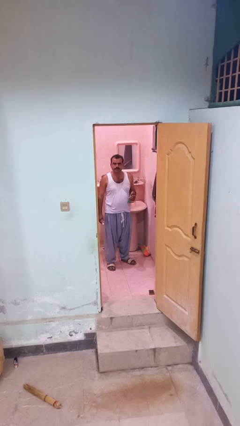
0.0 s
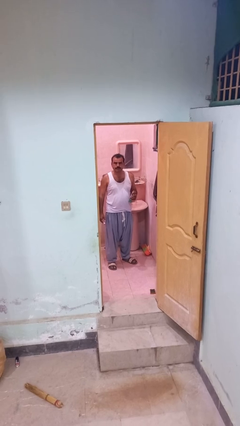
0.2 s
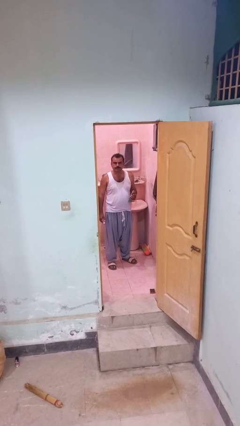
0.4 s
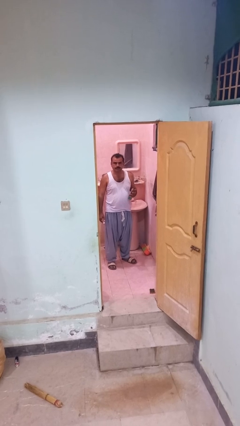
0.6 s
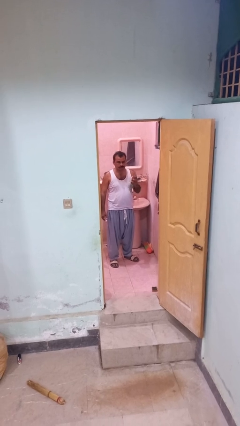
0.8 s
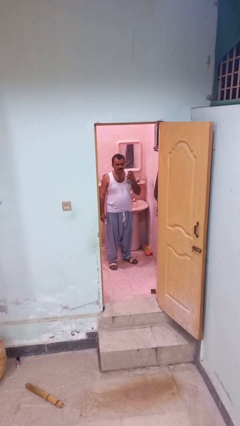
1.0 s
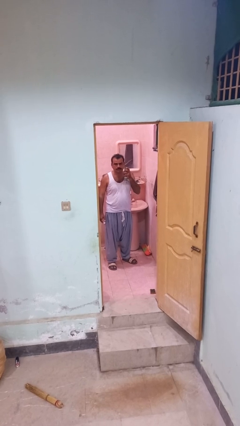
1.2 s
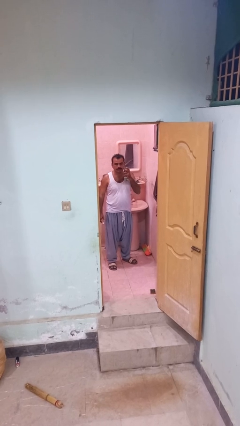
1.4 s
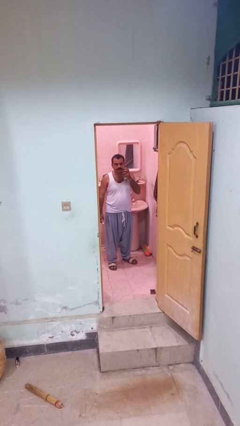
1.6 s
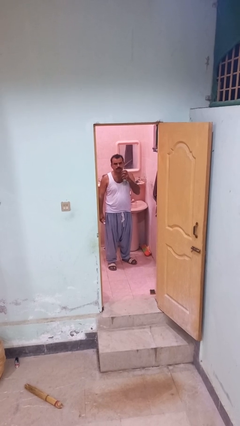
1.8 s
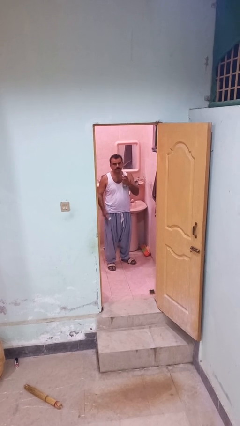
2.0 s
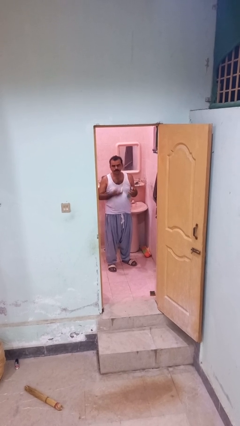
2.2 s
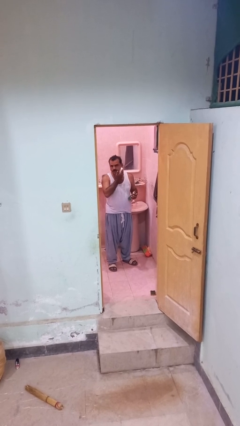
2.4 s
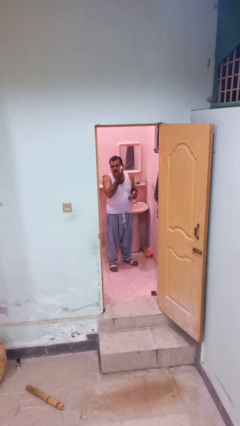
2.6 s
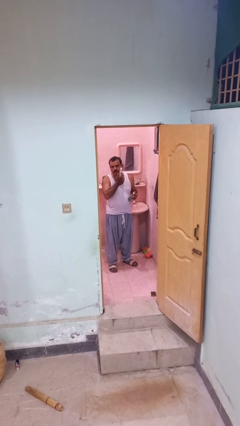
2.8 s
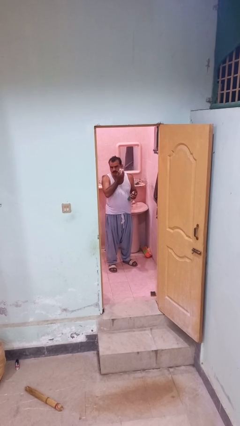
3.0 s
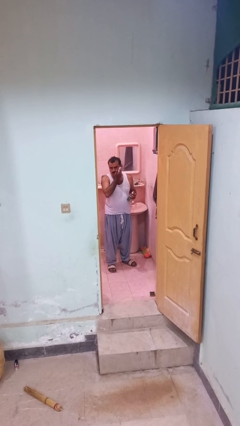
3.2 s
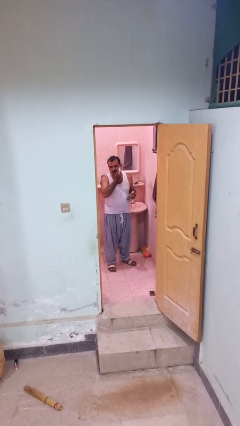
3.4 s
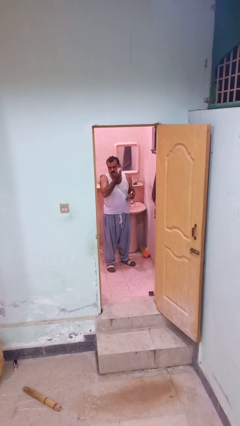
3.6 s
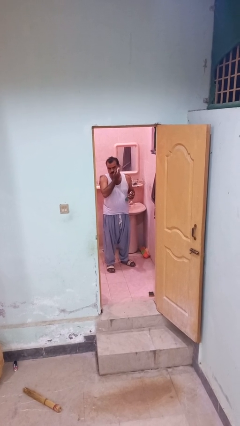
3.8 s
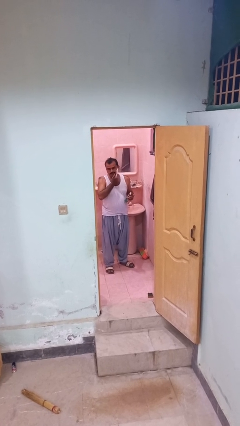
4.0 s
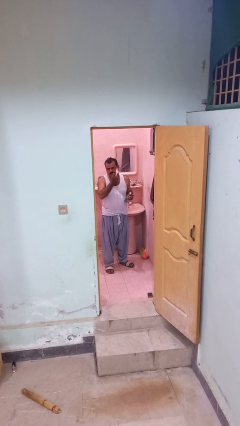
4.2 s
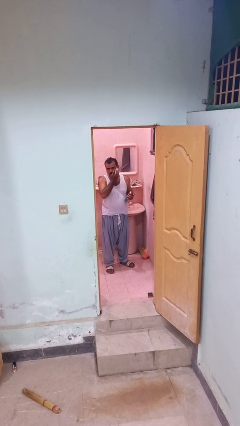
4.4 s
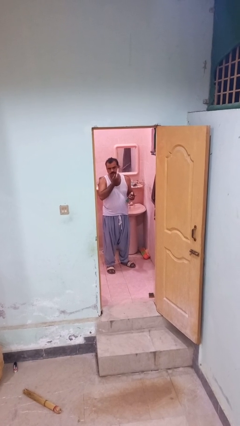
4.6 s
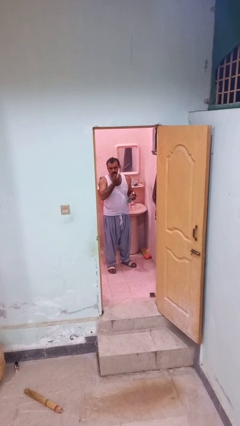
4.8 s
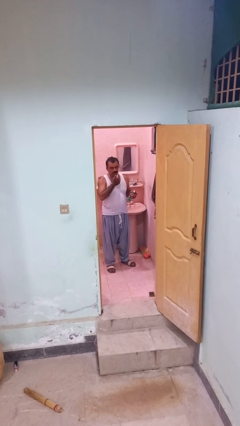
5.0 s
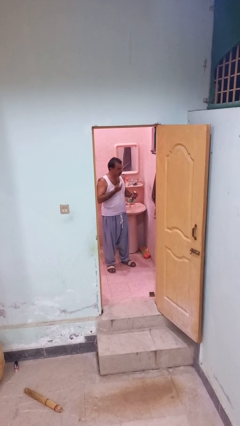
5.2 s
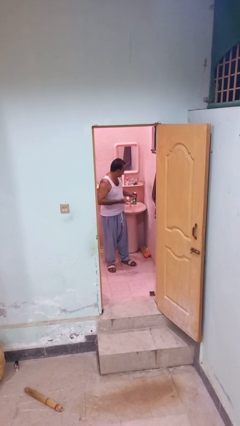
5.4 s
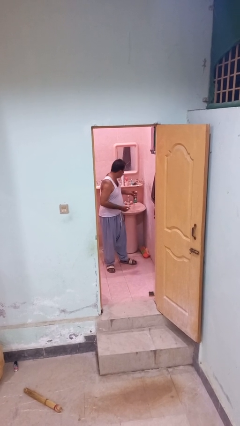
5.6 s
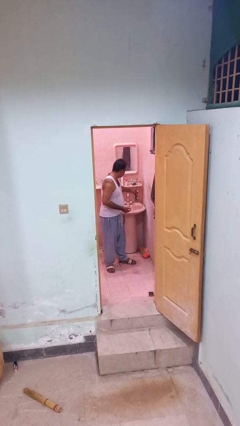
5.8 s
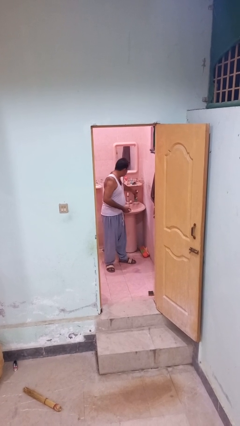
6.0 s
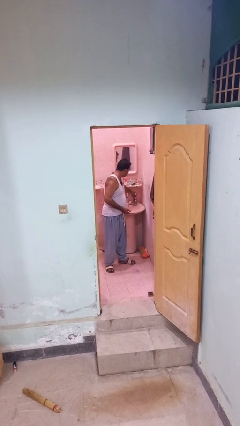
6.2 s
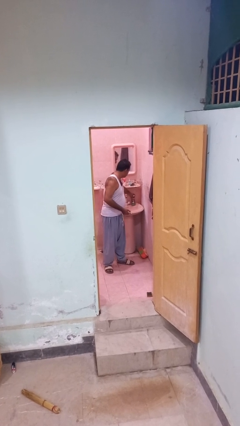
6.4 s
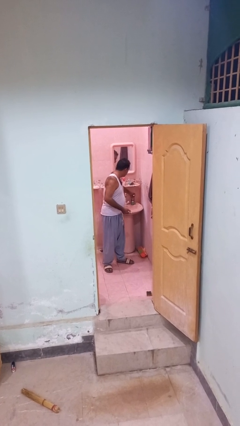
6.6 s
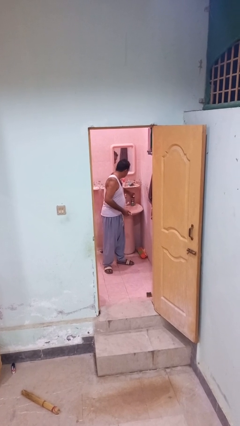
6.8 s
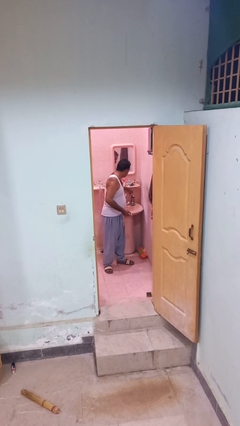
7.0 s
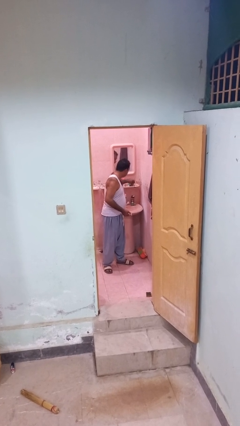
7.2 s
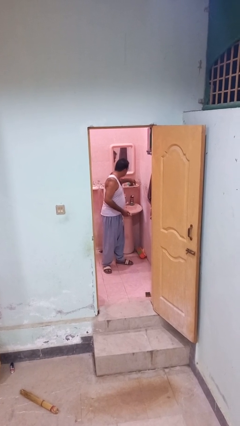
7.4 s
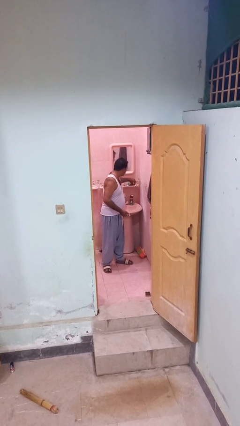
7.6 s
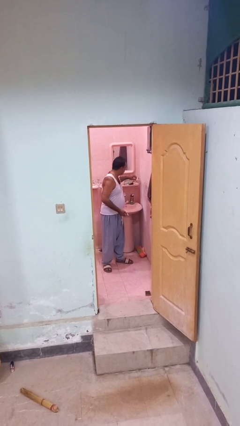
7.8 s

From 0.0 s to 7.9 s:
person applies shaving cream

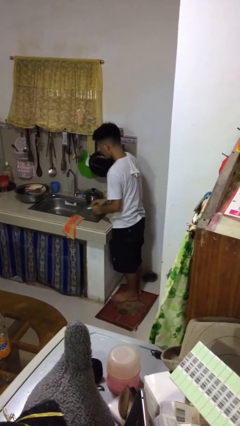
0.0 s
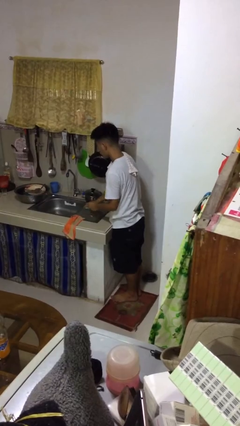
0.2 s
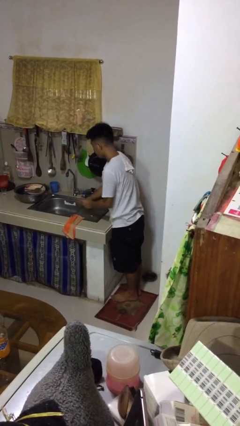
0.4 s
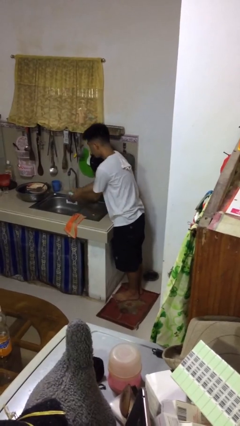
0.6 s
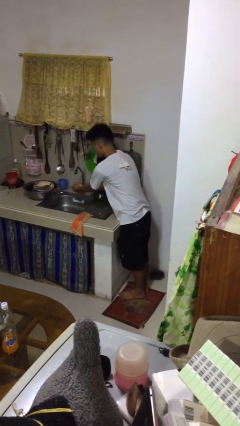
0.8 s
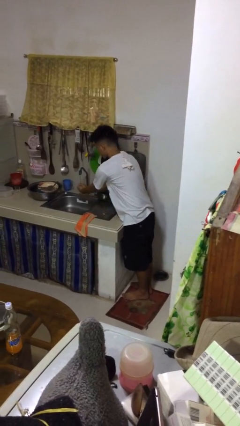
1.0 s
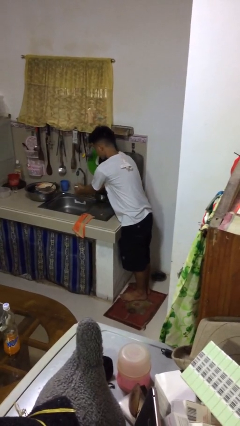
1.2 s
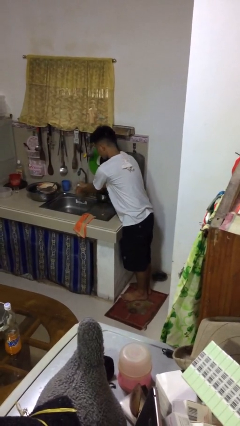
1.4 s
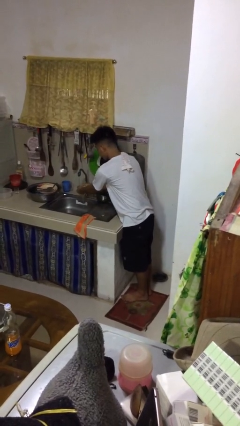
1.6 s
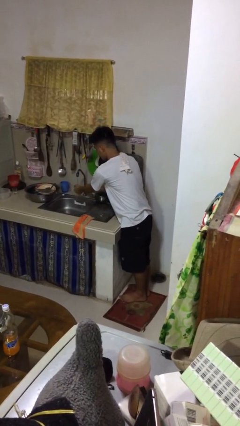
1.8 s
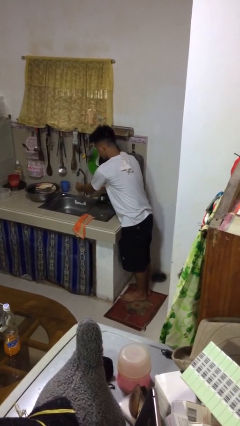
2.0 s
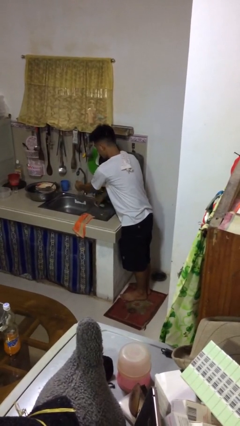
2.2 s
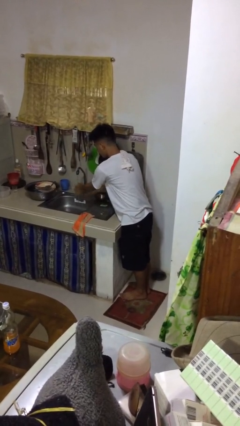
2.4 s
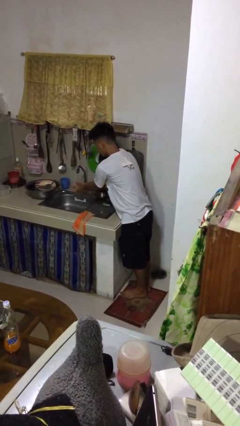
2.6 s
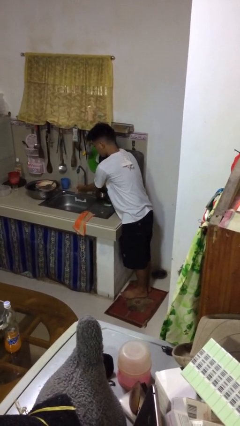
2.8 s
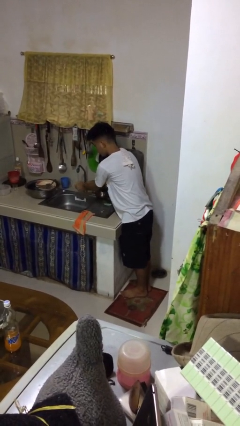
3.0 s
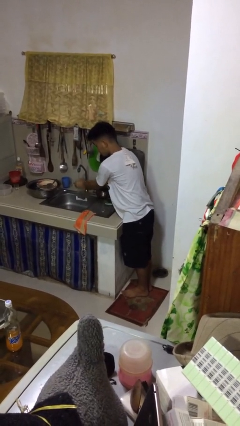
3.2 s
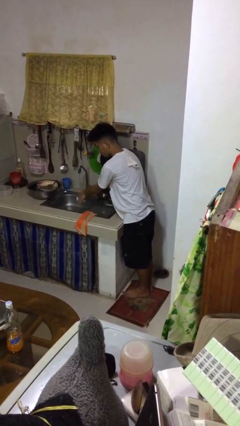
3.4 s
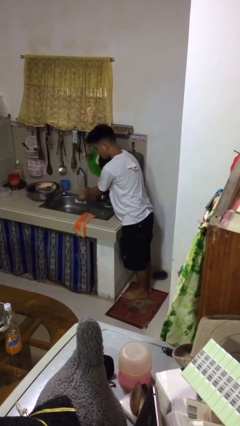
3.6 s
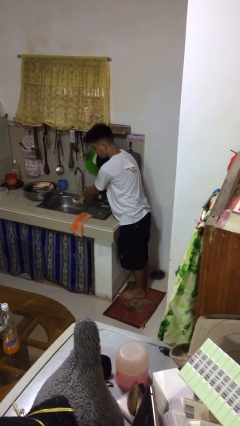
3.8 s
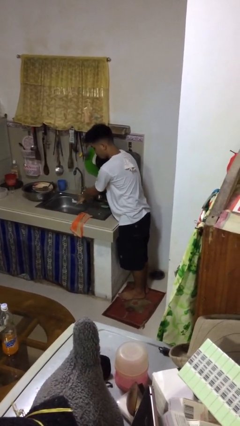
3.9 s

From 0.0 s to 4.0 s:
person washes hands

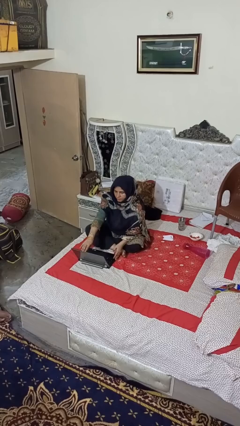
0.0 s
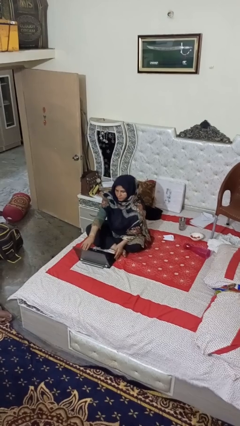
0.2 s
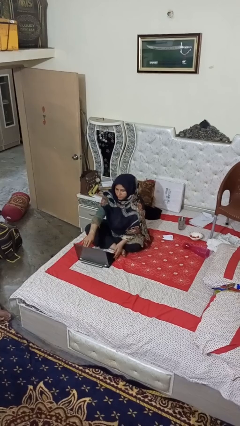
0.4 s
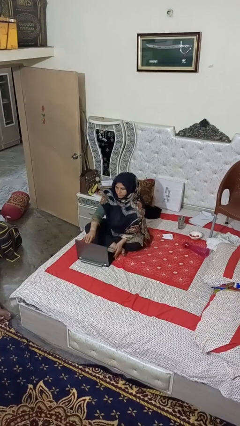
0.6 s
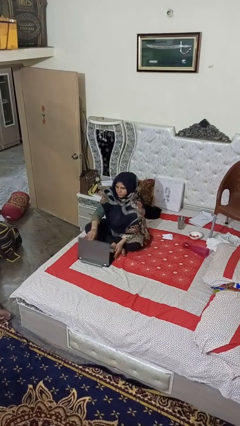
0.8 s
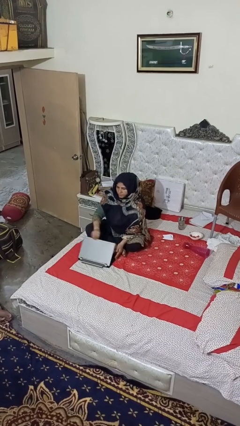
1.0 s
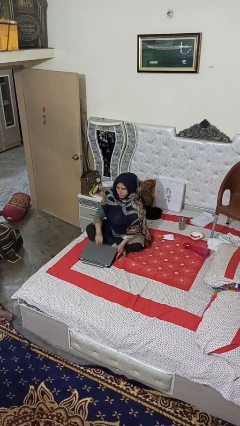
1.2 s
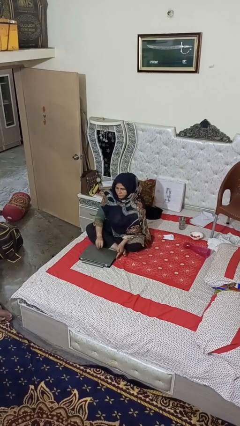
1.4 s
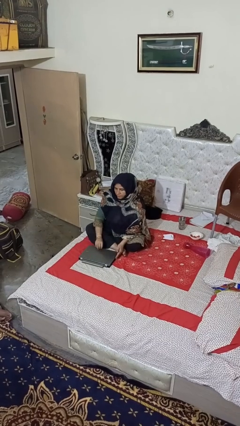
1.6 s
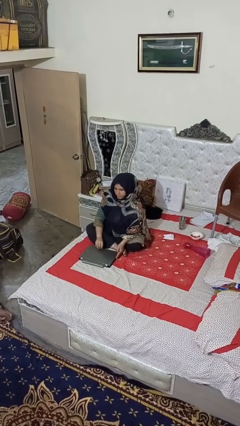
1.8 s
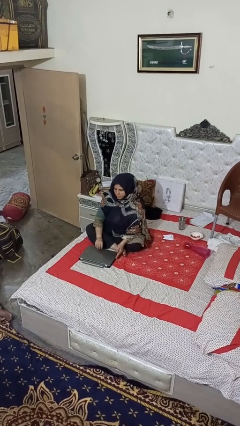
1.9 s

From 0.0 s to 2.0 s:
person closes laptop

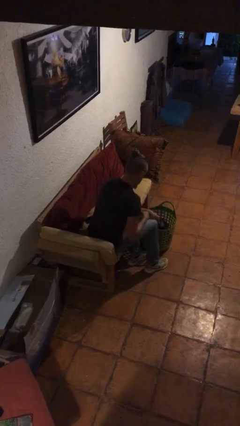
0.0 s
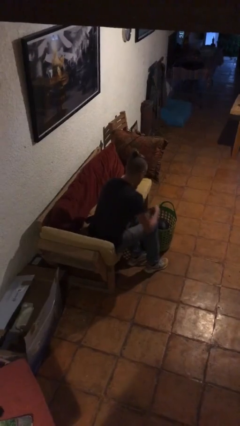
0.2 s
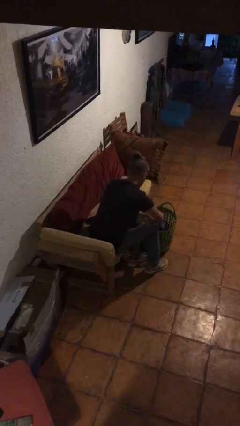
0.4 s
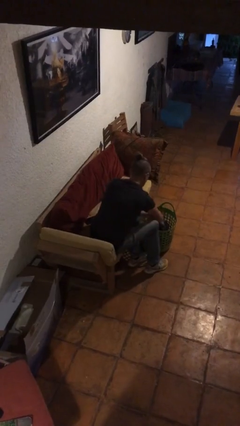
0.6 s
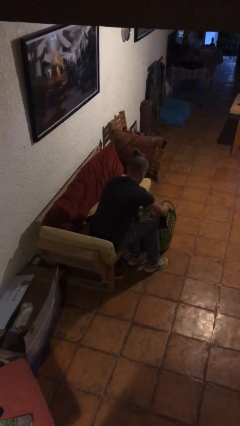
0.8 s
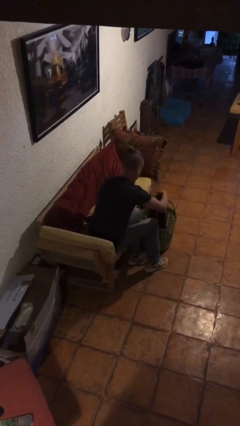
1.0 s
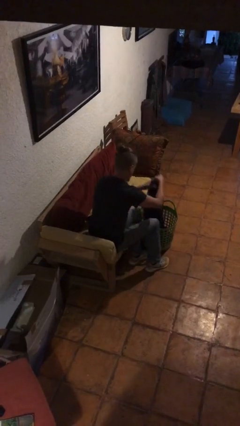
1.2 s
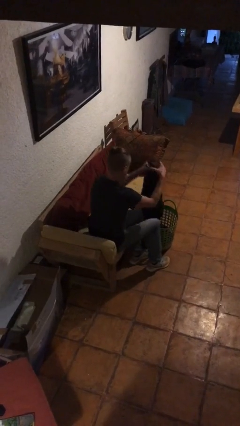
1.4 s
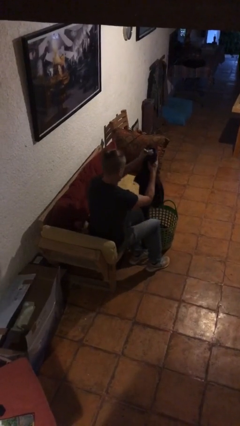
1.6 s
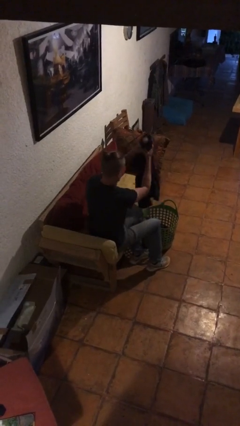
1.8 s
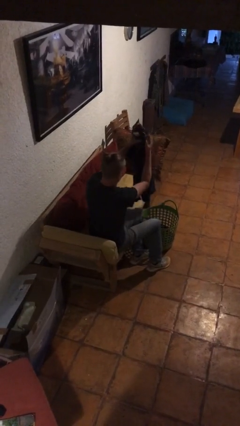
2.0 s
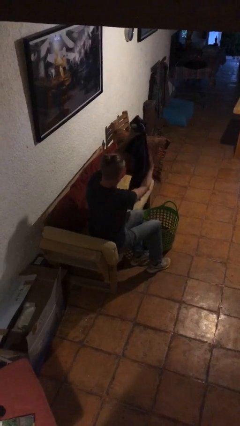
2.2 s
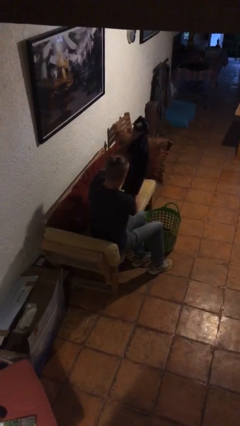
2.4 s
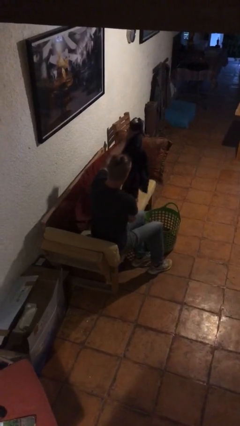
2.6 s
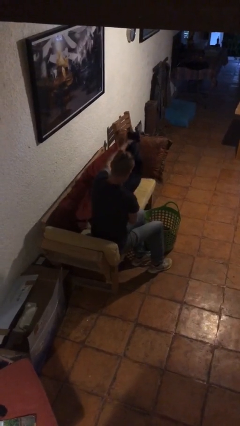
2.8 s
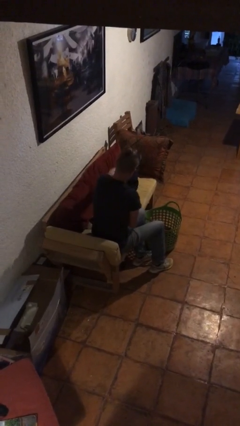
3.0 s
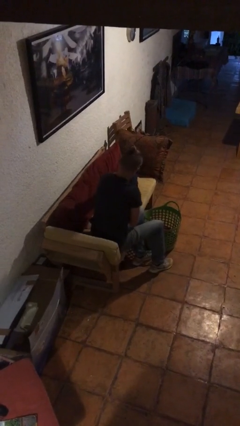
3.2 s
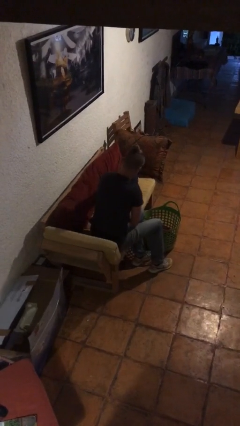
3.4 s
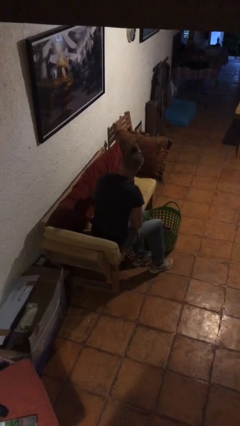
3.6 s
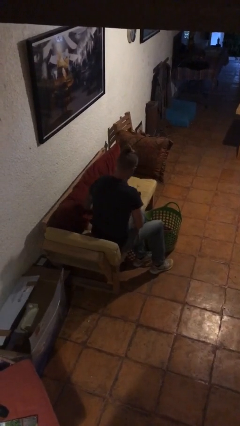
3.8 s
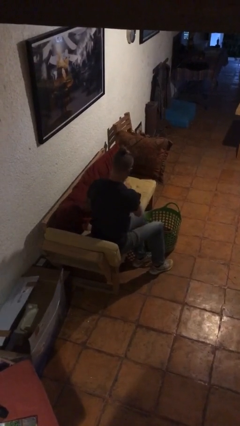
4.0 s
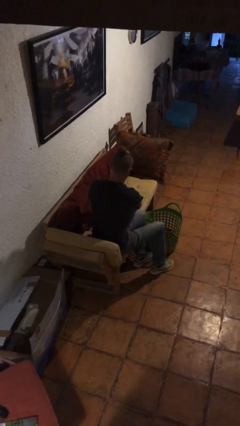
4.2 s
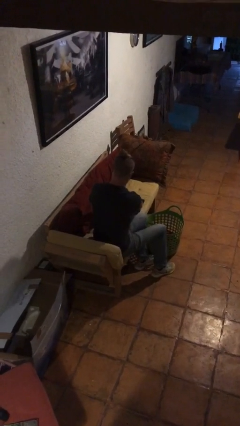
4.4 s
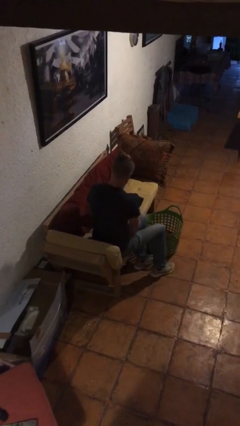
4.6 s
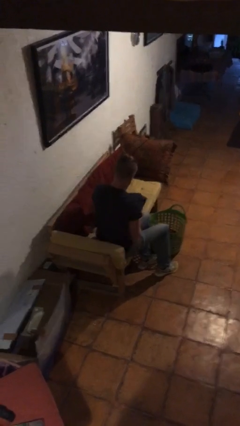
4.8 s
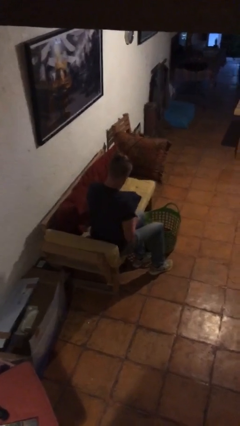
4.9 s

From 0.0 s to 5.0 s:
person folds pants
